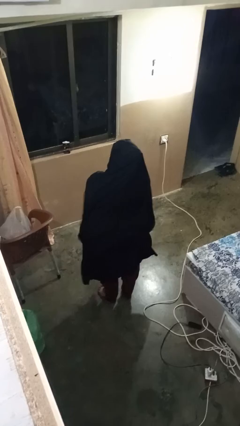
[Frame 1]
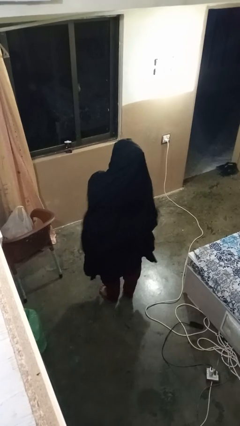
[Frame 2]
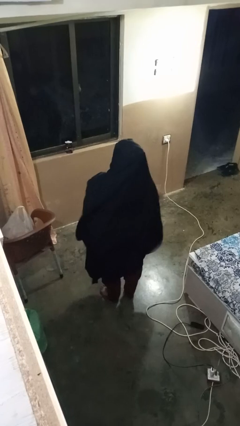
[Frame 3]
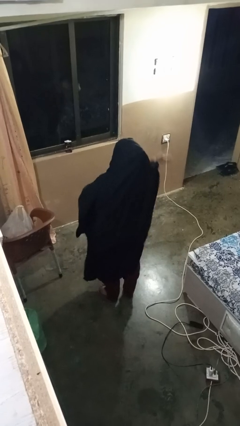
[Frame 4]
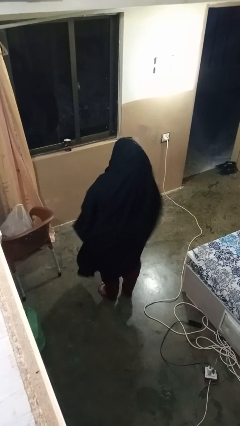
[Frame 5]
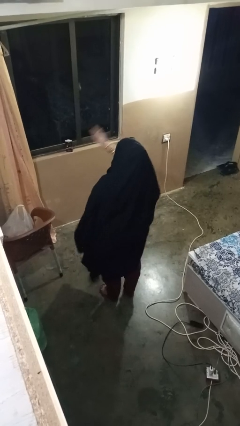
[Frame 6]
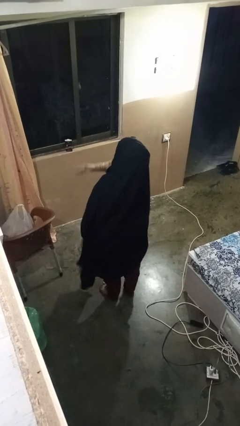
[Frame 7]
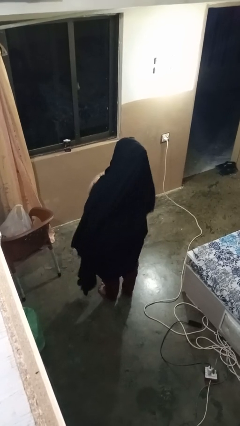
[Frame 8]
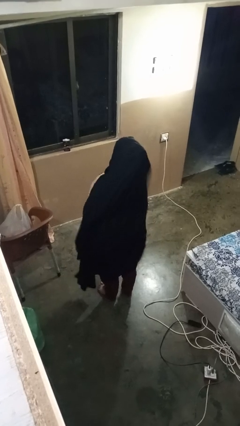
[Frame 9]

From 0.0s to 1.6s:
person gestures swipe left

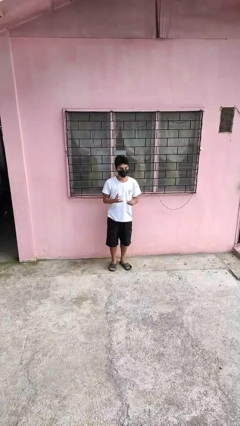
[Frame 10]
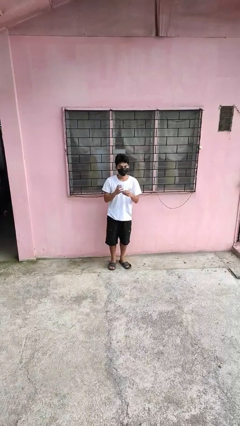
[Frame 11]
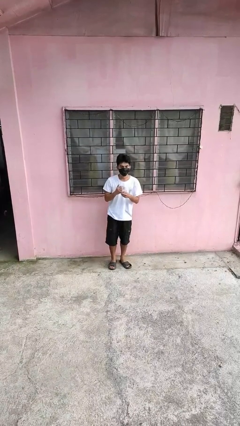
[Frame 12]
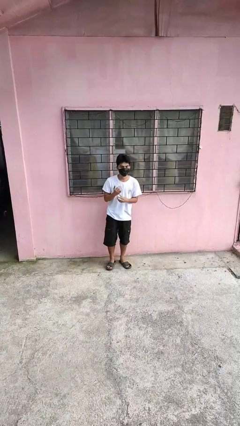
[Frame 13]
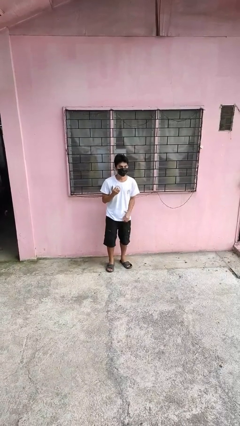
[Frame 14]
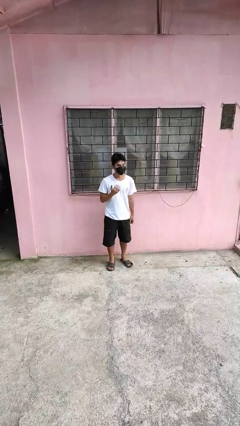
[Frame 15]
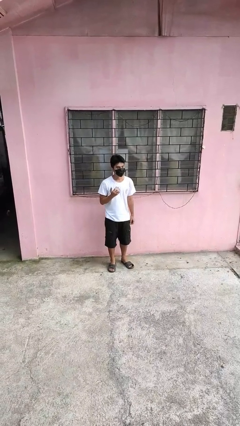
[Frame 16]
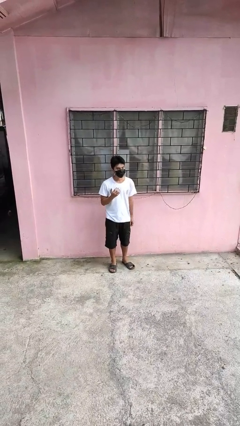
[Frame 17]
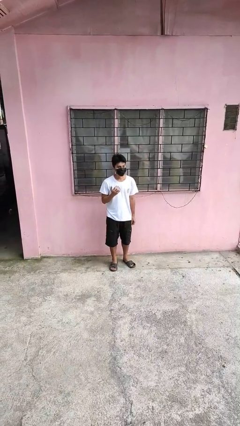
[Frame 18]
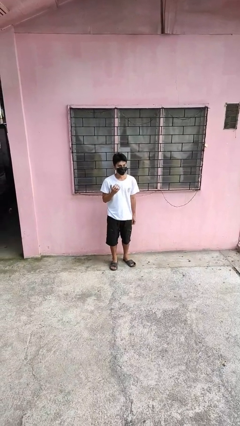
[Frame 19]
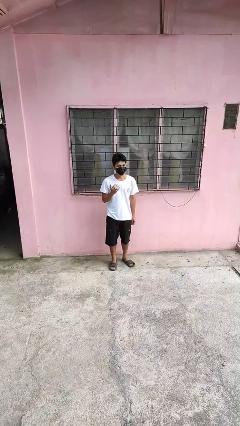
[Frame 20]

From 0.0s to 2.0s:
person puts on ring

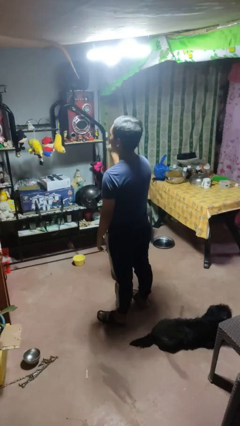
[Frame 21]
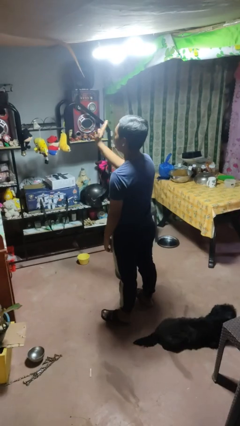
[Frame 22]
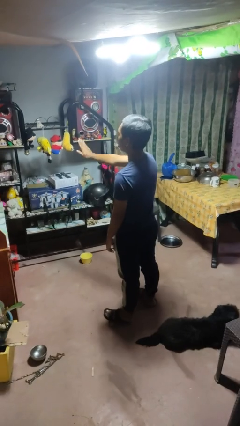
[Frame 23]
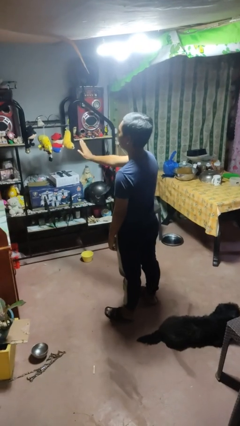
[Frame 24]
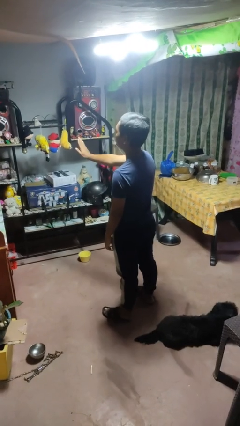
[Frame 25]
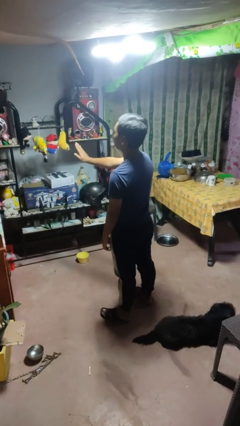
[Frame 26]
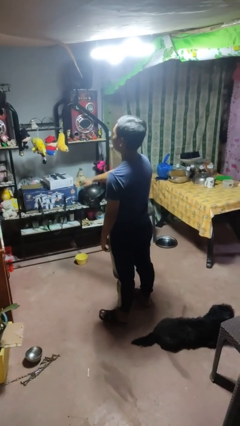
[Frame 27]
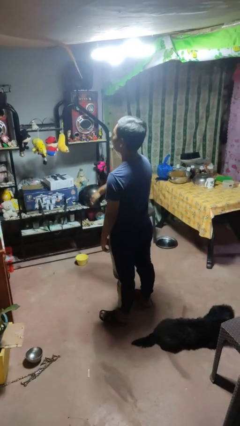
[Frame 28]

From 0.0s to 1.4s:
person gestures stop

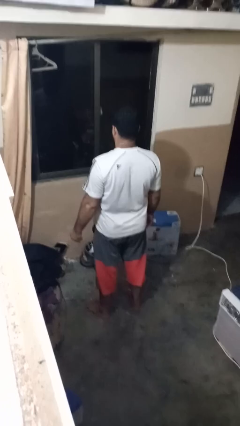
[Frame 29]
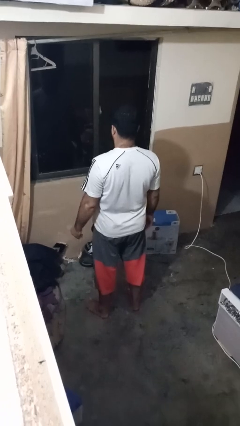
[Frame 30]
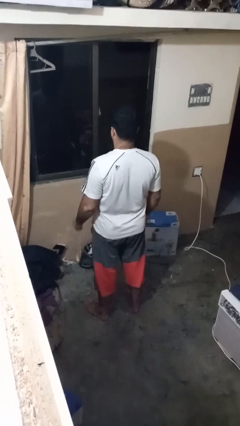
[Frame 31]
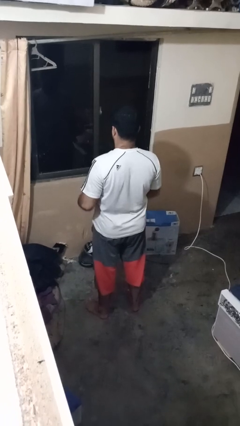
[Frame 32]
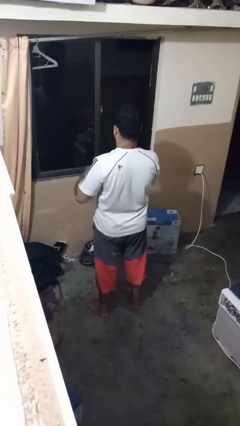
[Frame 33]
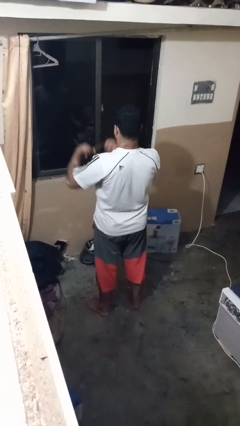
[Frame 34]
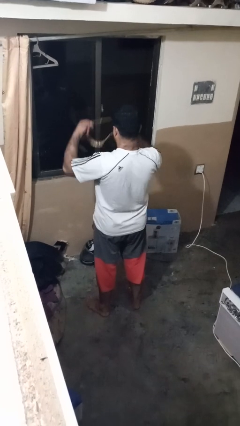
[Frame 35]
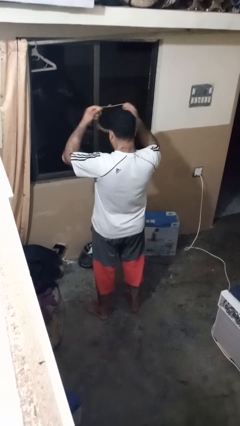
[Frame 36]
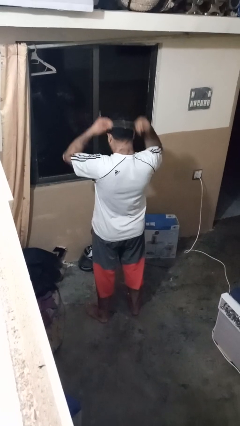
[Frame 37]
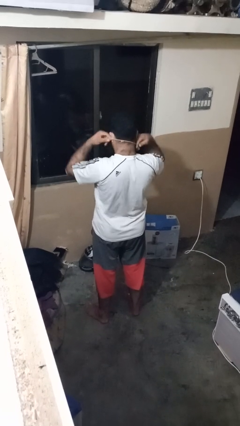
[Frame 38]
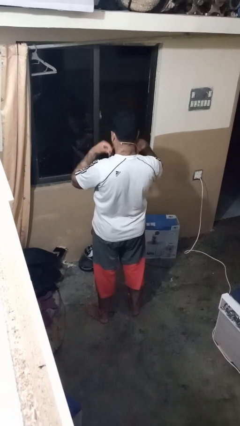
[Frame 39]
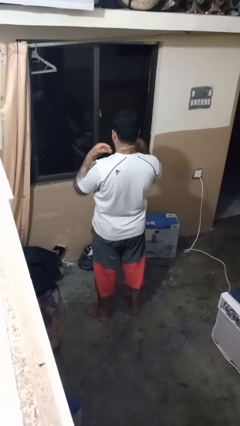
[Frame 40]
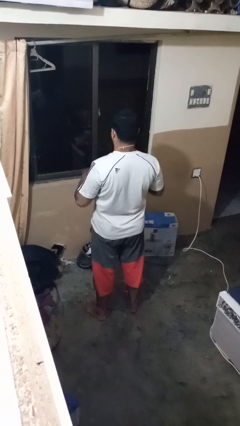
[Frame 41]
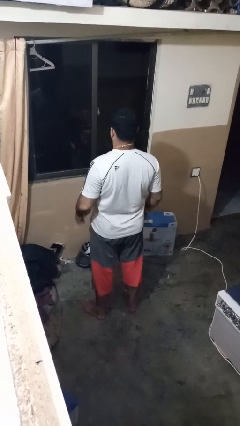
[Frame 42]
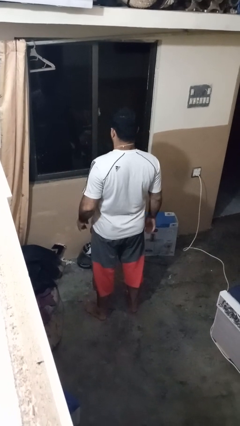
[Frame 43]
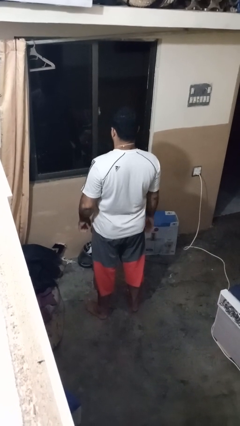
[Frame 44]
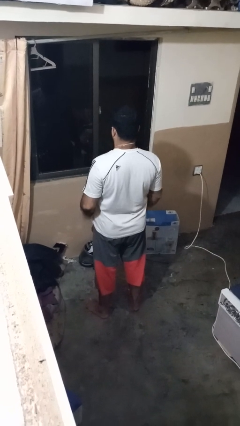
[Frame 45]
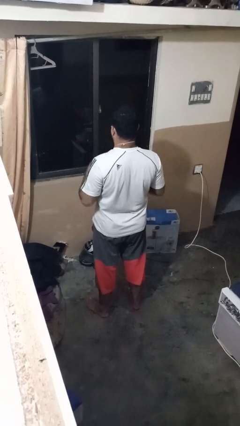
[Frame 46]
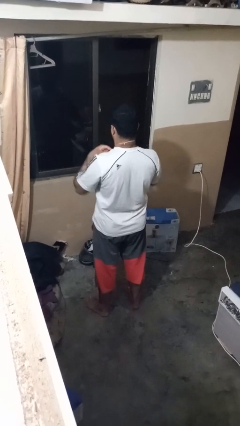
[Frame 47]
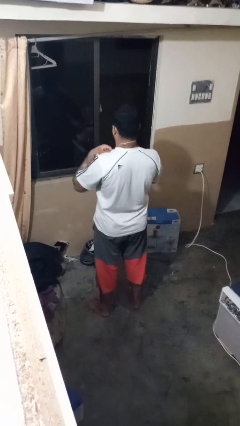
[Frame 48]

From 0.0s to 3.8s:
person puts on necklace

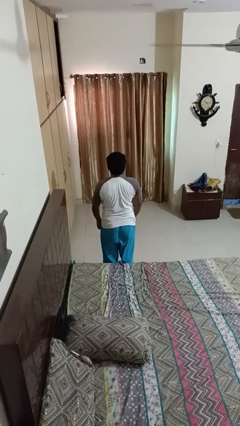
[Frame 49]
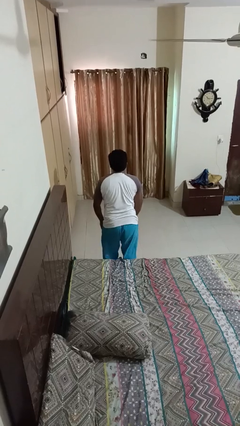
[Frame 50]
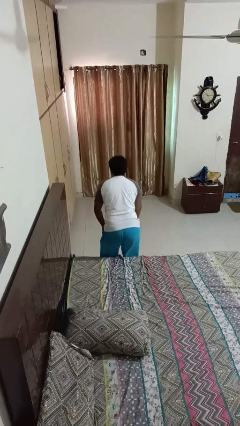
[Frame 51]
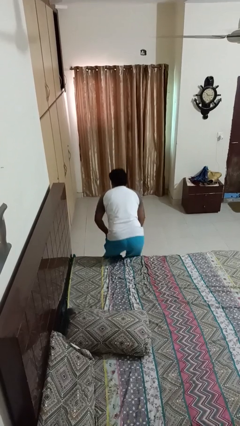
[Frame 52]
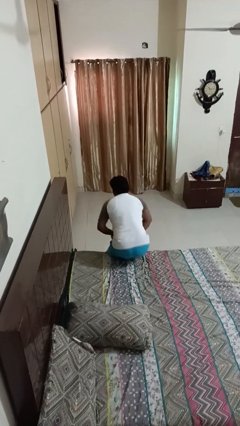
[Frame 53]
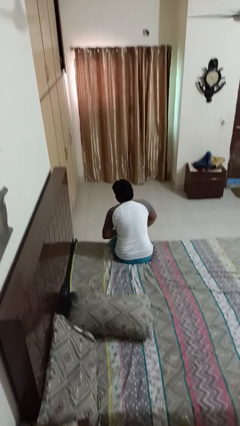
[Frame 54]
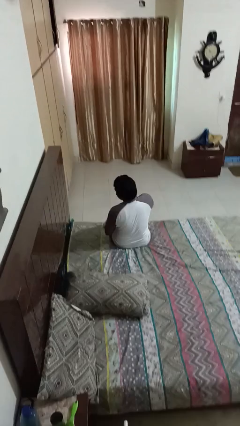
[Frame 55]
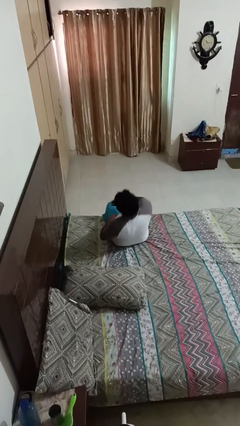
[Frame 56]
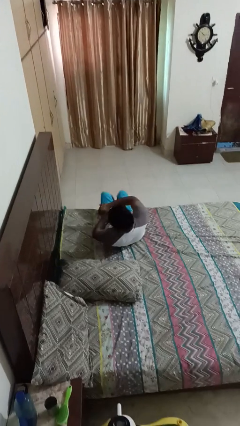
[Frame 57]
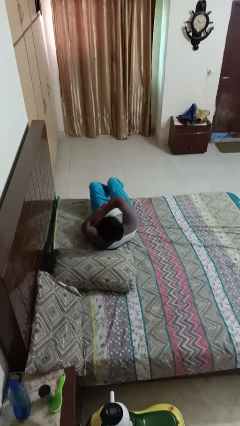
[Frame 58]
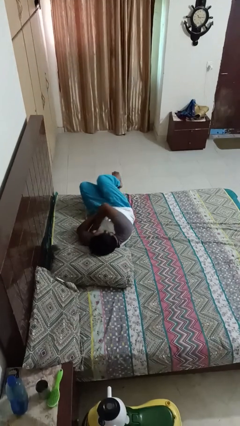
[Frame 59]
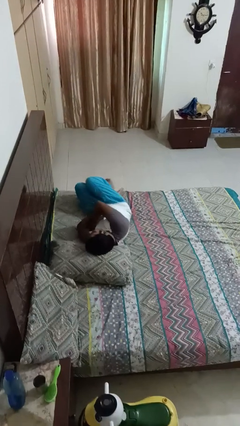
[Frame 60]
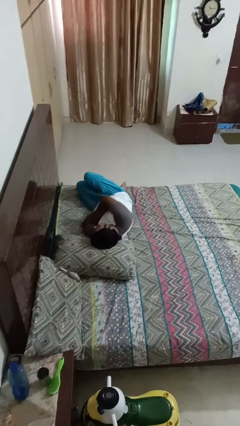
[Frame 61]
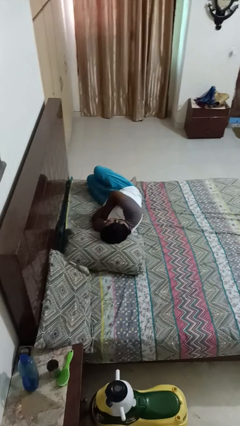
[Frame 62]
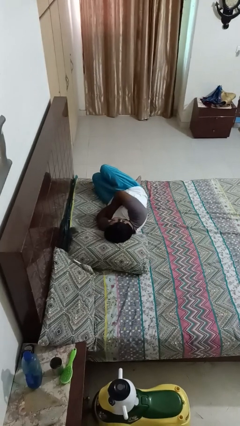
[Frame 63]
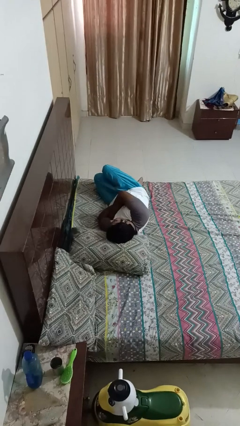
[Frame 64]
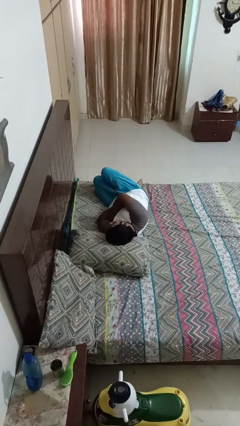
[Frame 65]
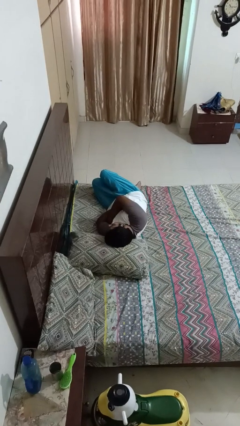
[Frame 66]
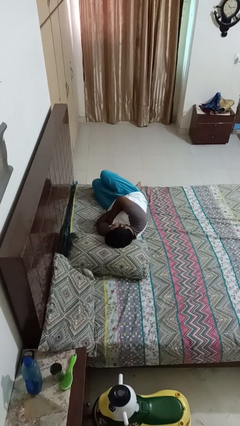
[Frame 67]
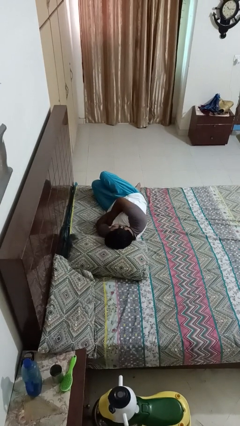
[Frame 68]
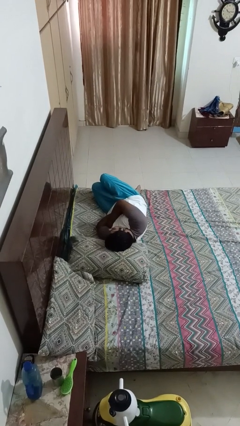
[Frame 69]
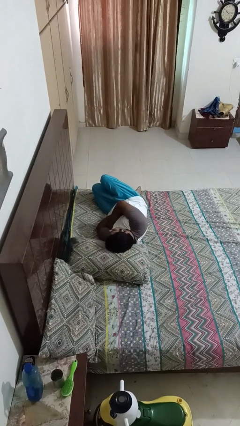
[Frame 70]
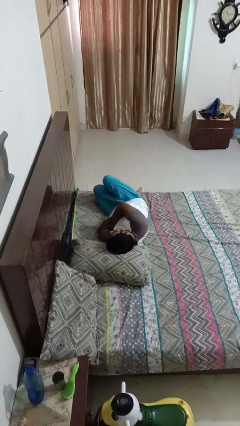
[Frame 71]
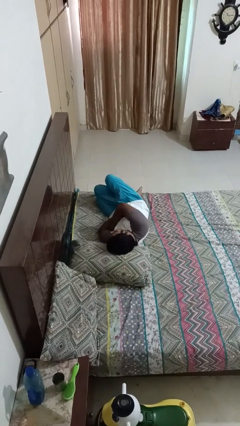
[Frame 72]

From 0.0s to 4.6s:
person lies down on bed

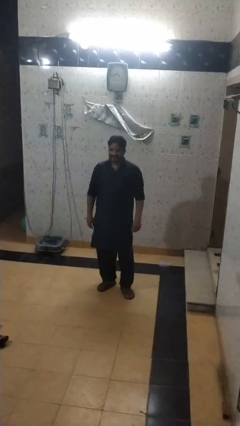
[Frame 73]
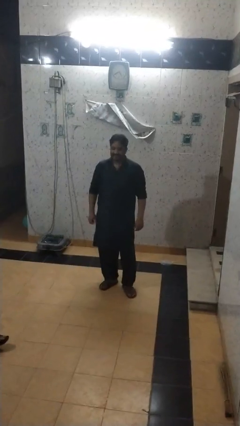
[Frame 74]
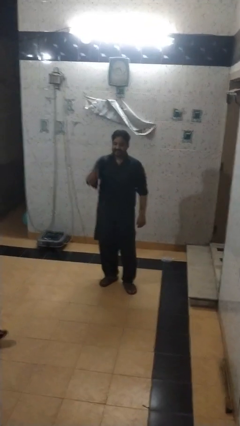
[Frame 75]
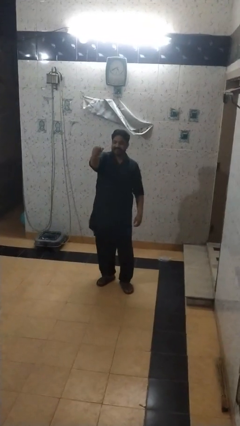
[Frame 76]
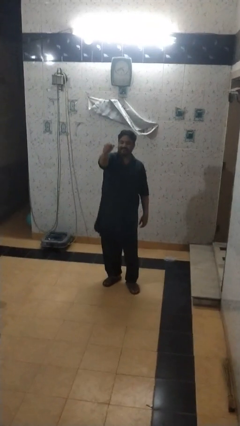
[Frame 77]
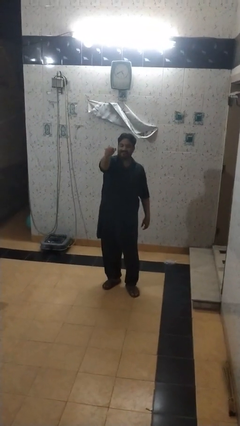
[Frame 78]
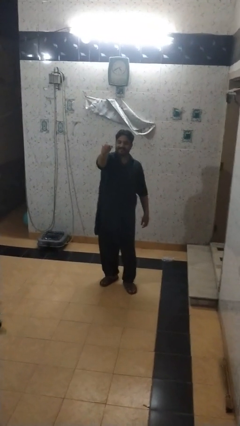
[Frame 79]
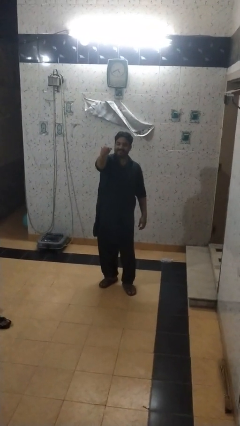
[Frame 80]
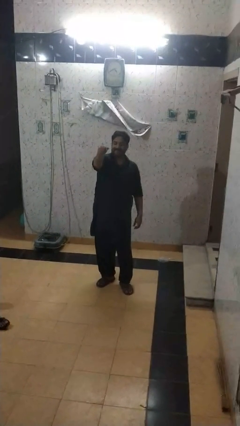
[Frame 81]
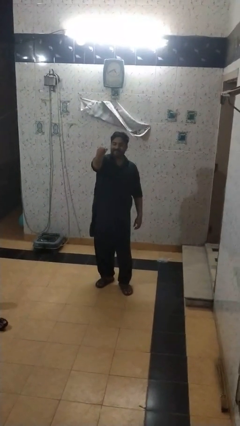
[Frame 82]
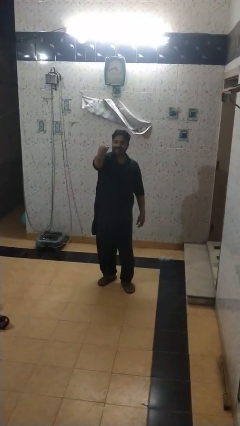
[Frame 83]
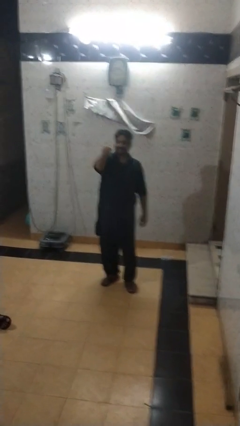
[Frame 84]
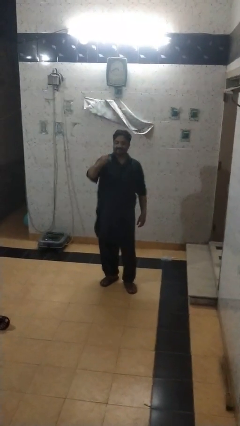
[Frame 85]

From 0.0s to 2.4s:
person punches

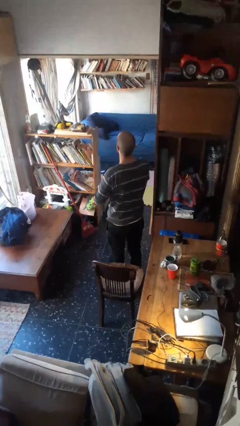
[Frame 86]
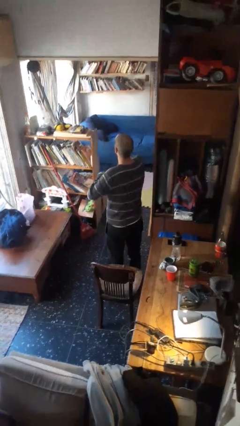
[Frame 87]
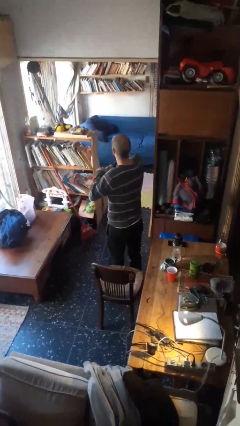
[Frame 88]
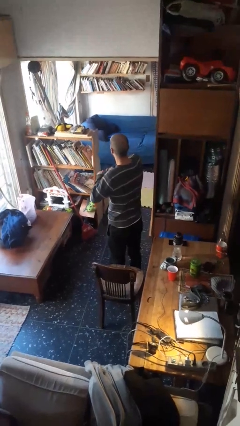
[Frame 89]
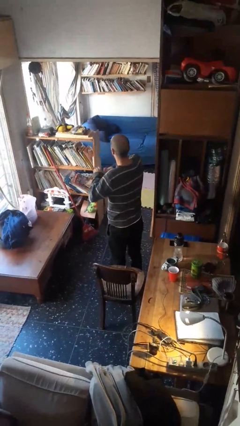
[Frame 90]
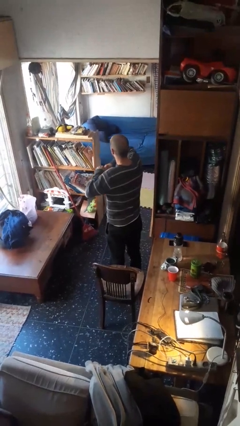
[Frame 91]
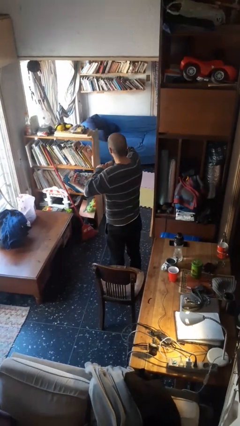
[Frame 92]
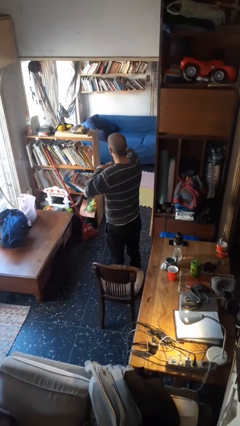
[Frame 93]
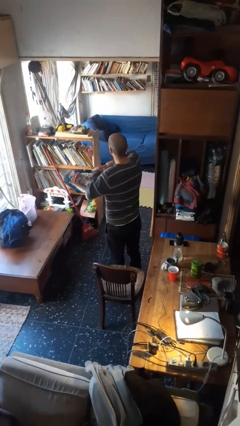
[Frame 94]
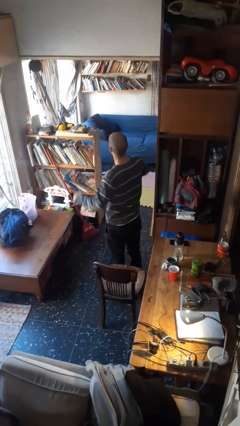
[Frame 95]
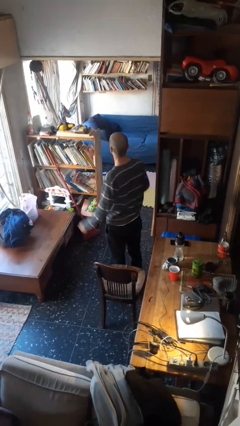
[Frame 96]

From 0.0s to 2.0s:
person snaps fingers
